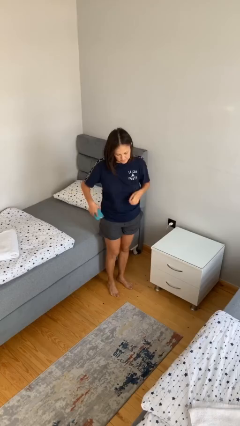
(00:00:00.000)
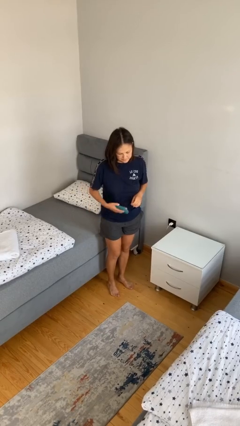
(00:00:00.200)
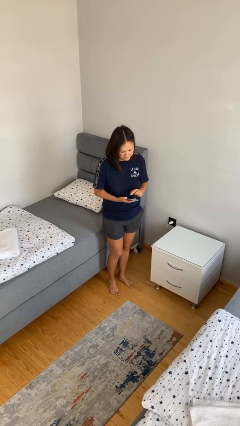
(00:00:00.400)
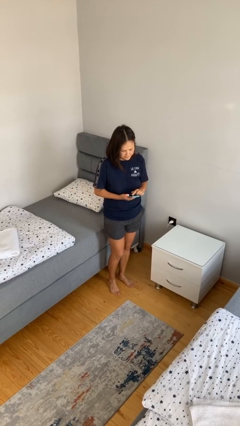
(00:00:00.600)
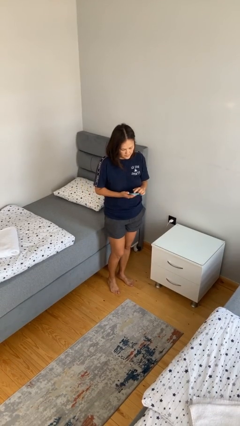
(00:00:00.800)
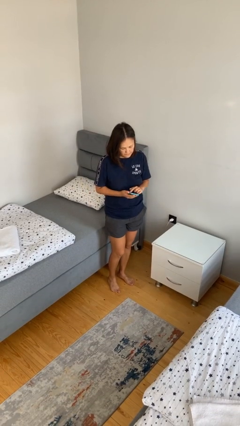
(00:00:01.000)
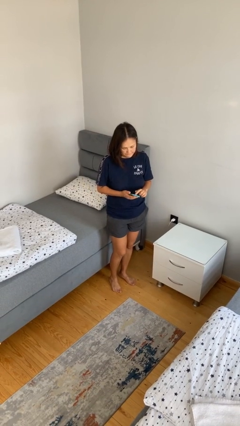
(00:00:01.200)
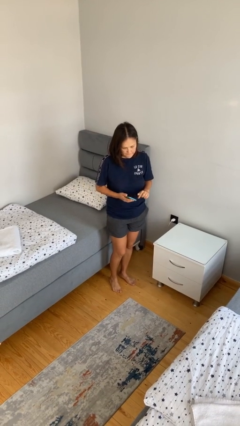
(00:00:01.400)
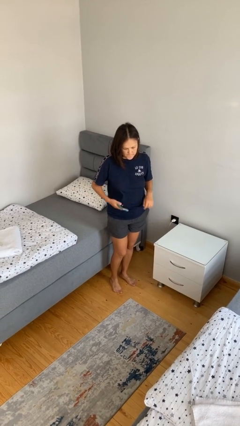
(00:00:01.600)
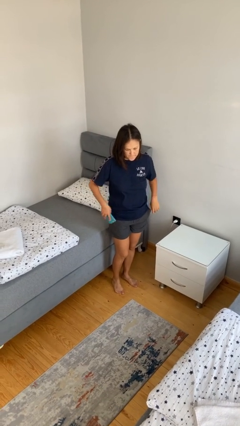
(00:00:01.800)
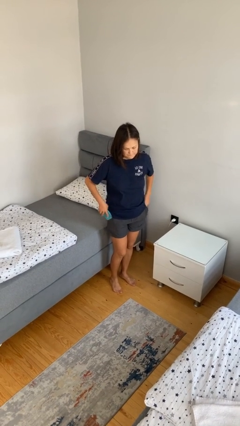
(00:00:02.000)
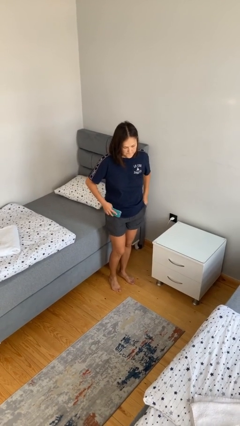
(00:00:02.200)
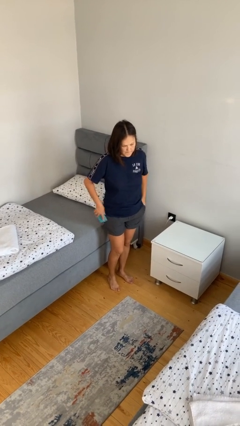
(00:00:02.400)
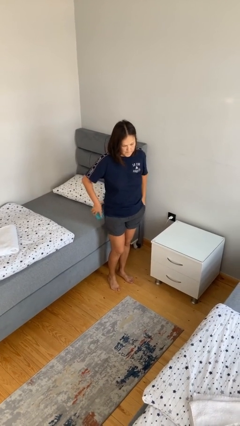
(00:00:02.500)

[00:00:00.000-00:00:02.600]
person takes phone from pocket

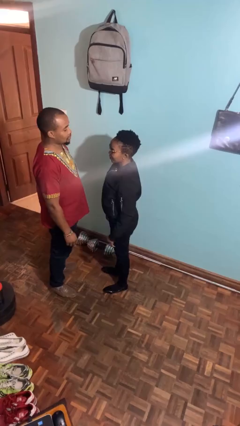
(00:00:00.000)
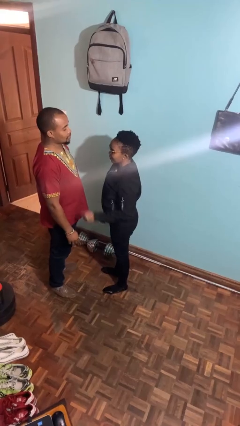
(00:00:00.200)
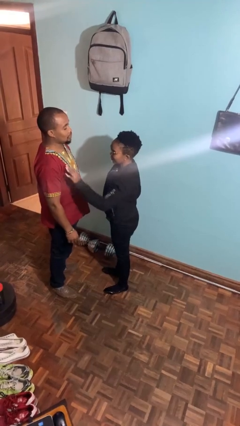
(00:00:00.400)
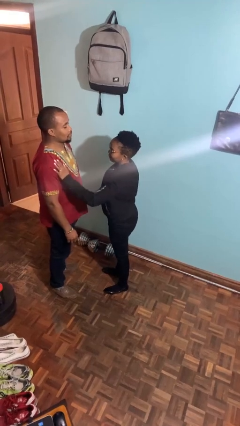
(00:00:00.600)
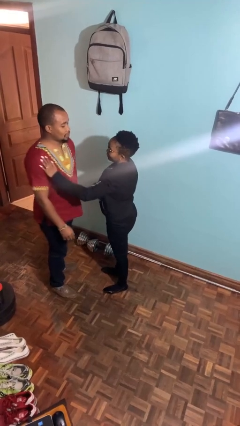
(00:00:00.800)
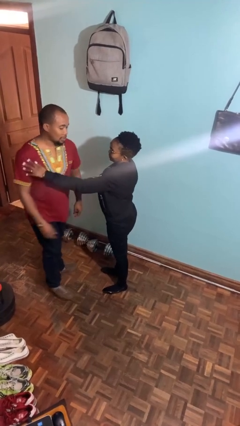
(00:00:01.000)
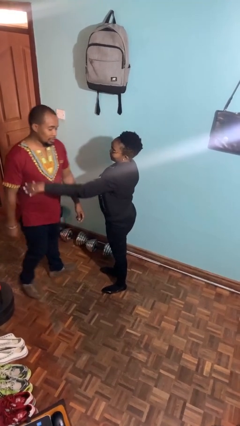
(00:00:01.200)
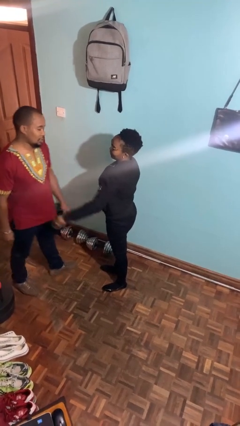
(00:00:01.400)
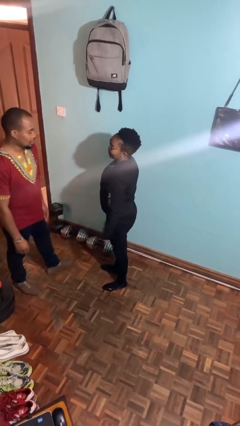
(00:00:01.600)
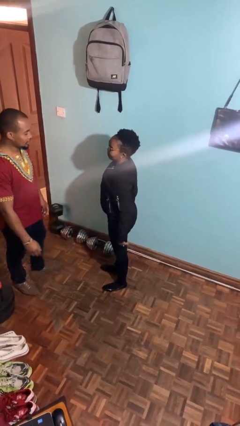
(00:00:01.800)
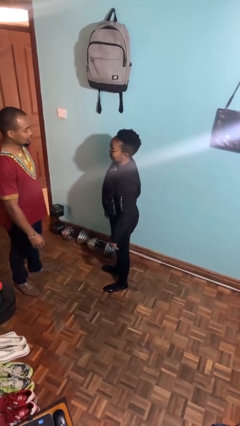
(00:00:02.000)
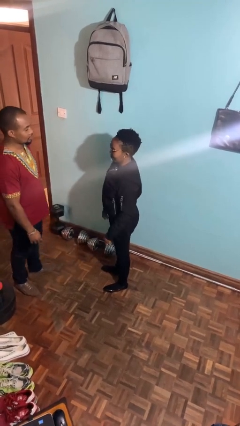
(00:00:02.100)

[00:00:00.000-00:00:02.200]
person shoves person

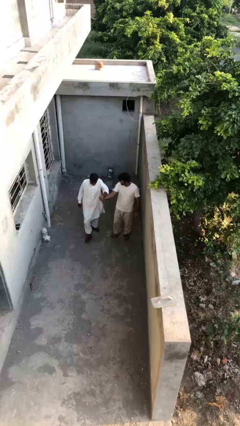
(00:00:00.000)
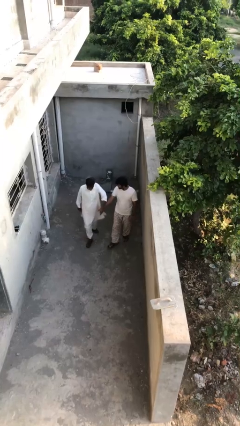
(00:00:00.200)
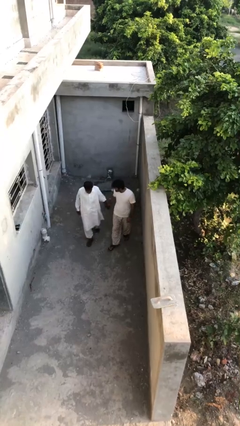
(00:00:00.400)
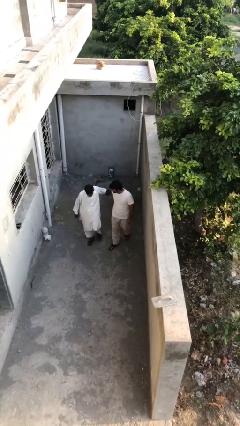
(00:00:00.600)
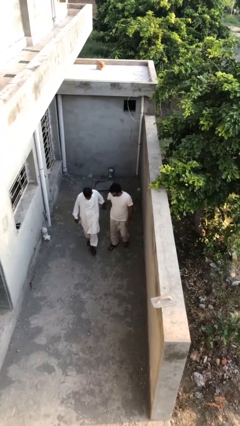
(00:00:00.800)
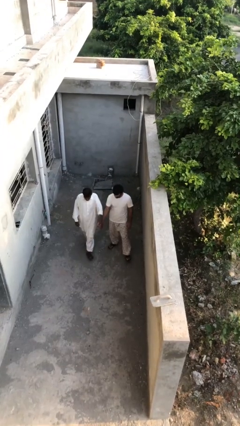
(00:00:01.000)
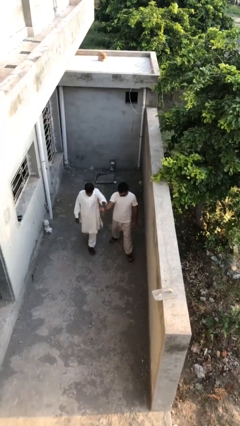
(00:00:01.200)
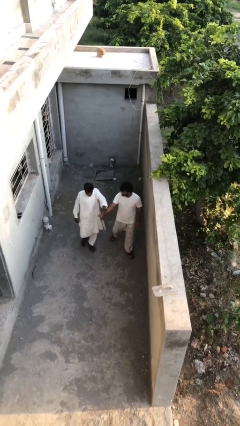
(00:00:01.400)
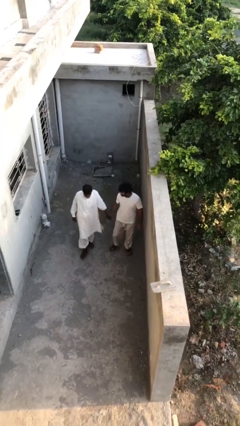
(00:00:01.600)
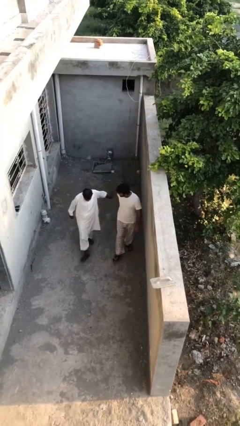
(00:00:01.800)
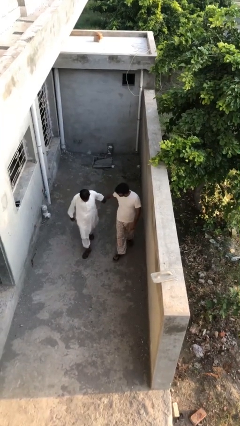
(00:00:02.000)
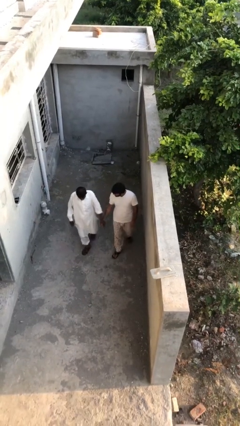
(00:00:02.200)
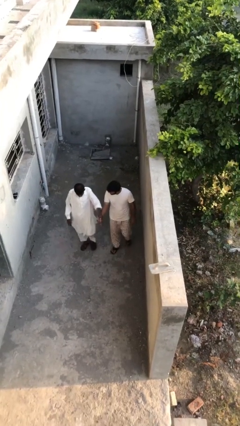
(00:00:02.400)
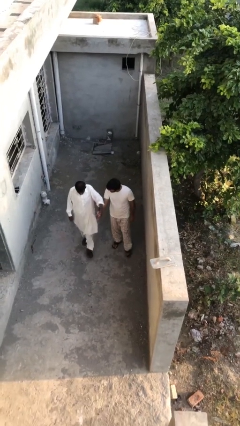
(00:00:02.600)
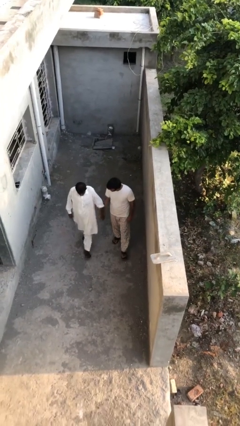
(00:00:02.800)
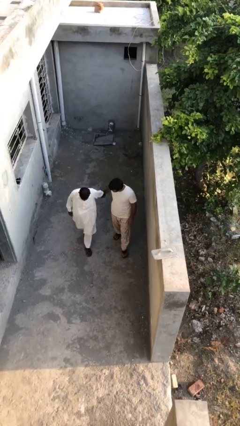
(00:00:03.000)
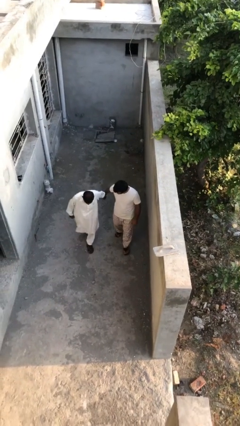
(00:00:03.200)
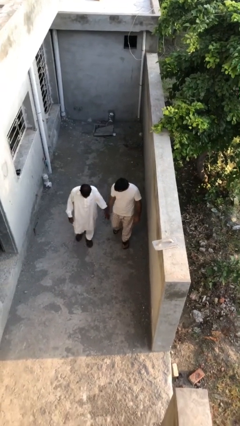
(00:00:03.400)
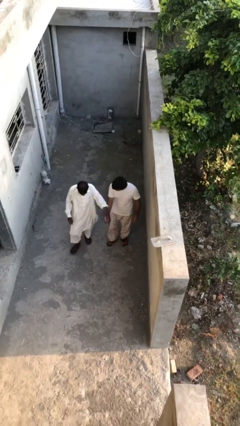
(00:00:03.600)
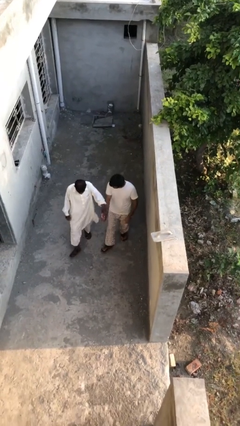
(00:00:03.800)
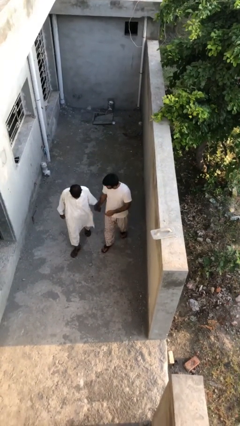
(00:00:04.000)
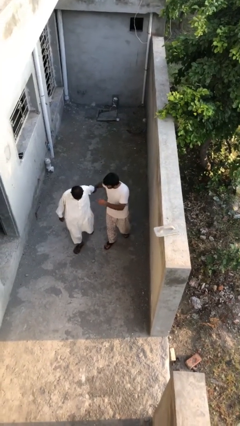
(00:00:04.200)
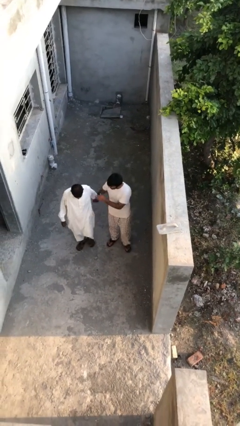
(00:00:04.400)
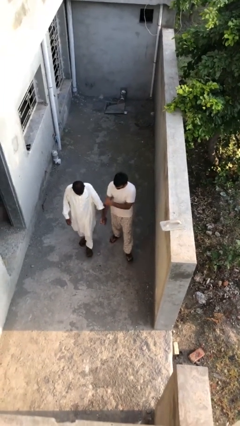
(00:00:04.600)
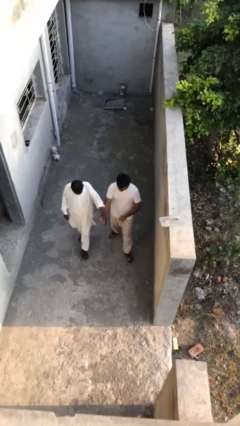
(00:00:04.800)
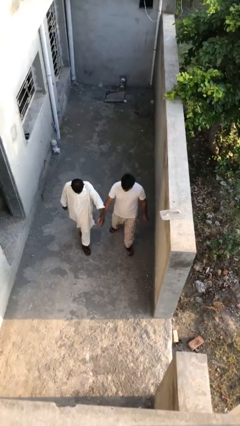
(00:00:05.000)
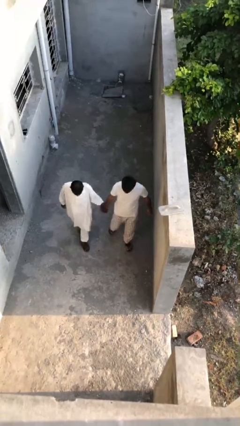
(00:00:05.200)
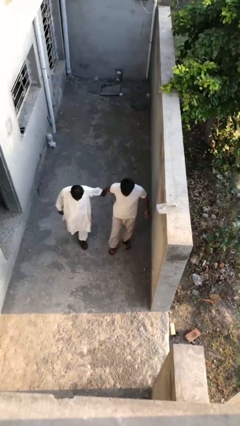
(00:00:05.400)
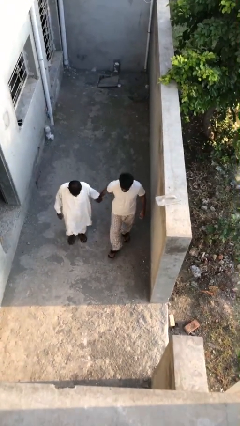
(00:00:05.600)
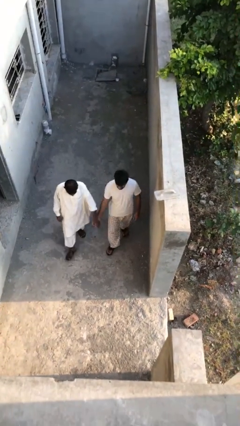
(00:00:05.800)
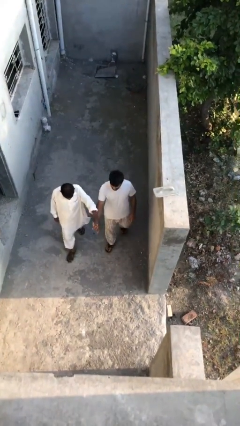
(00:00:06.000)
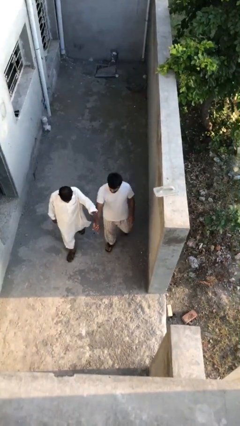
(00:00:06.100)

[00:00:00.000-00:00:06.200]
person holds hand

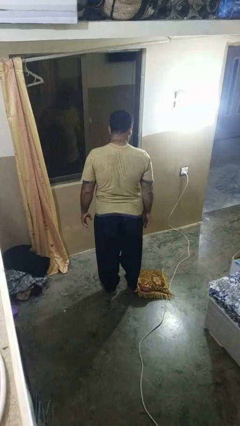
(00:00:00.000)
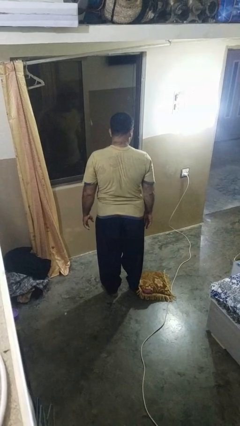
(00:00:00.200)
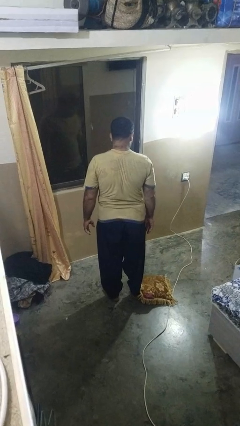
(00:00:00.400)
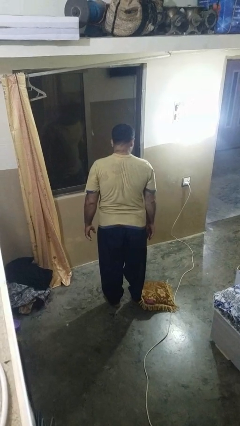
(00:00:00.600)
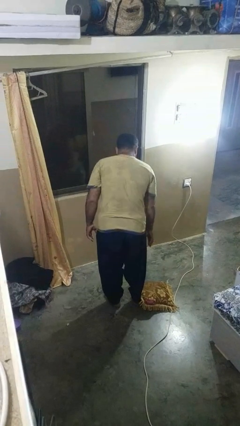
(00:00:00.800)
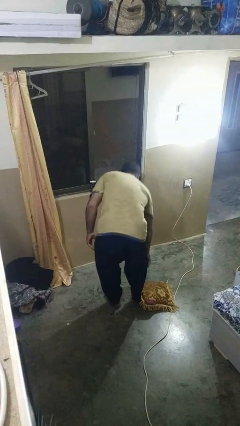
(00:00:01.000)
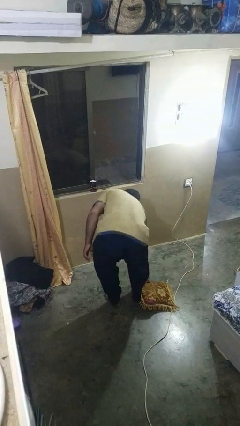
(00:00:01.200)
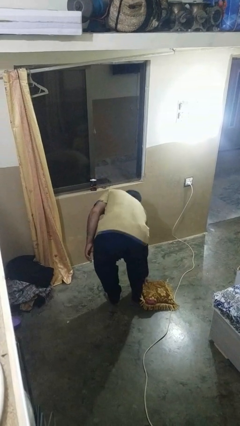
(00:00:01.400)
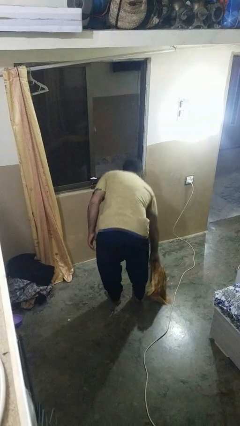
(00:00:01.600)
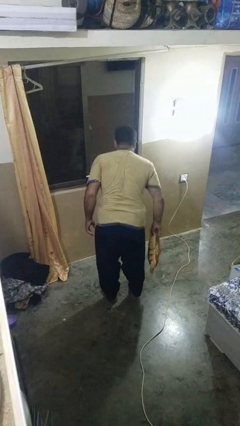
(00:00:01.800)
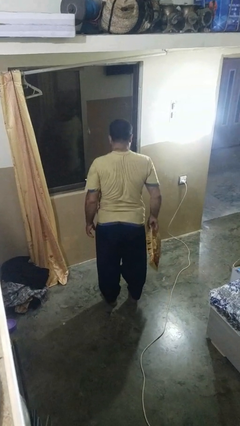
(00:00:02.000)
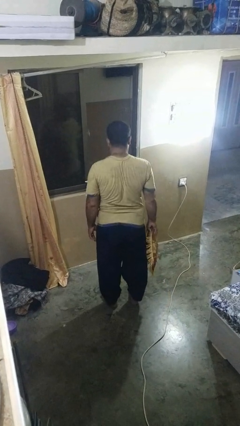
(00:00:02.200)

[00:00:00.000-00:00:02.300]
person picks up object from floor

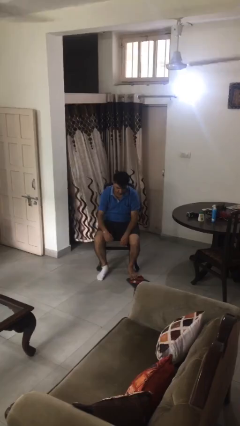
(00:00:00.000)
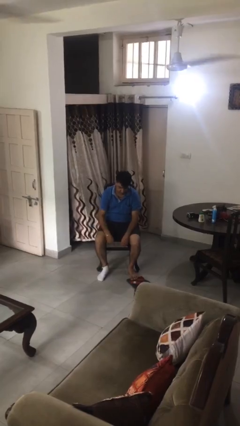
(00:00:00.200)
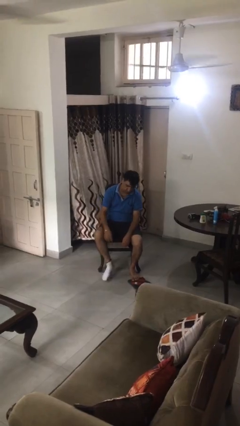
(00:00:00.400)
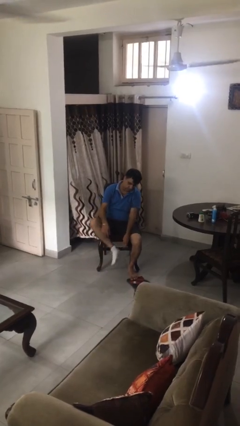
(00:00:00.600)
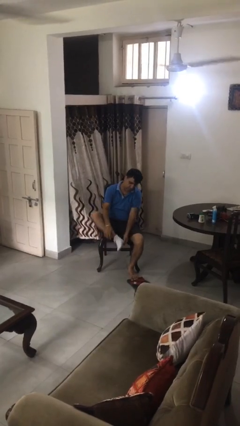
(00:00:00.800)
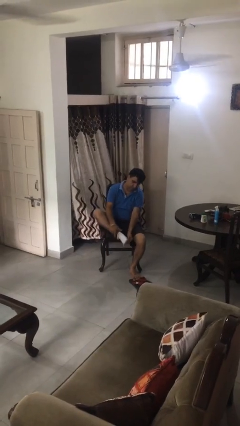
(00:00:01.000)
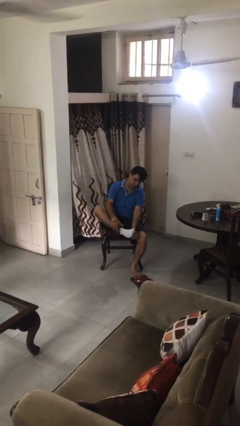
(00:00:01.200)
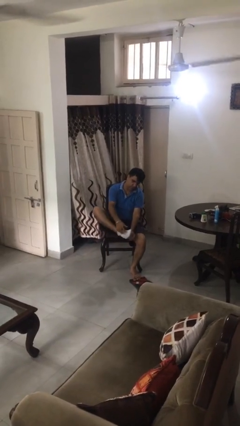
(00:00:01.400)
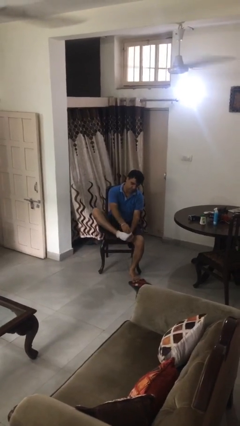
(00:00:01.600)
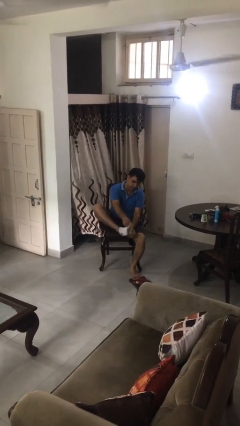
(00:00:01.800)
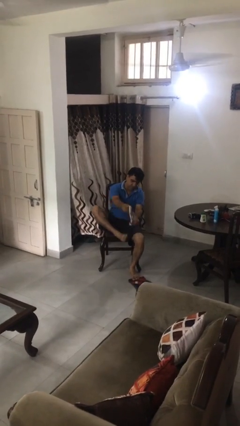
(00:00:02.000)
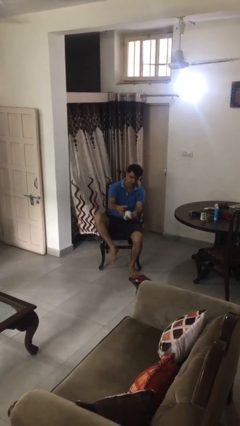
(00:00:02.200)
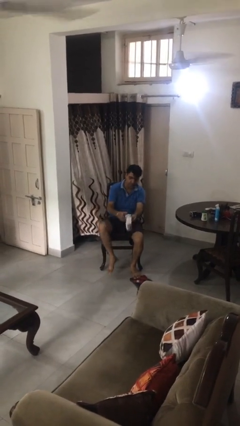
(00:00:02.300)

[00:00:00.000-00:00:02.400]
person takes off socks

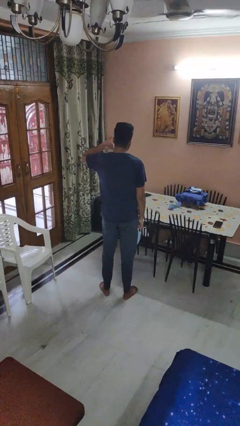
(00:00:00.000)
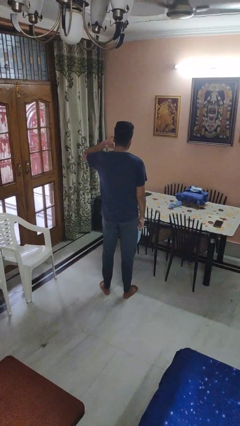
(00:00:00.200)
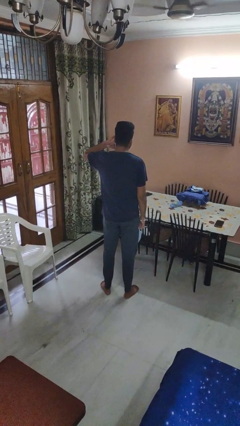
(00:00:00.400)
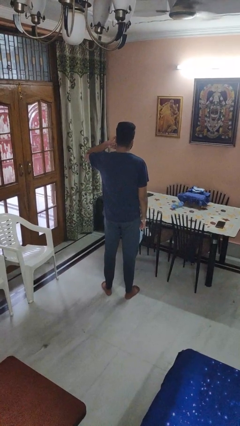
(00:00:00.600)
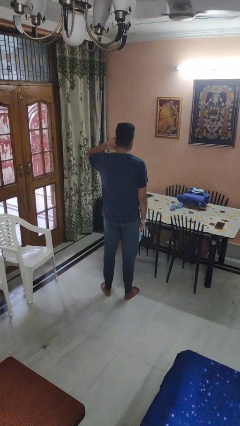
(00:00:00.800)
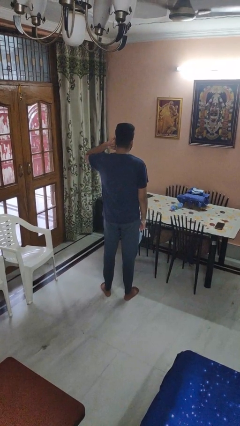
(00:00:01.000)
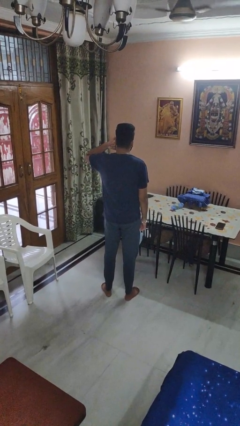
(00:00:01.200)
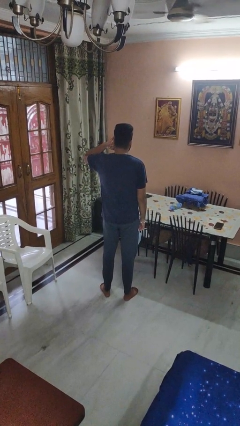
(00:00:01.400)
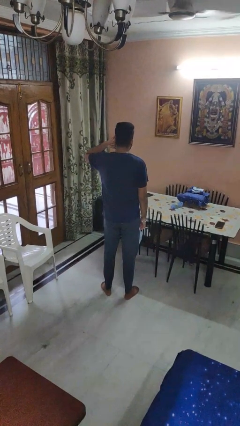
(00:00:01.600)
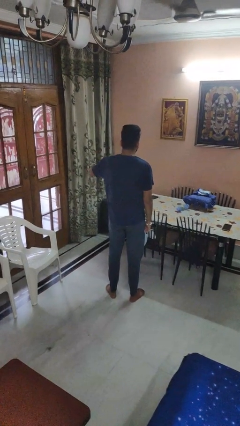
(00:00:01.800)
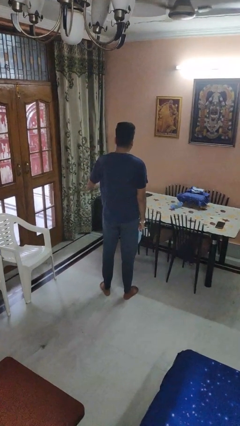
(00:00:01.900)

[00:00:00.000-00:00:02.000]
person gestures call me
